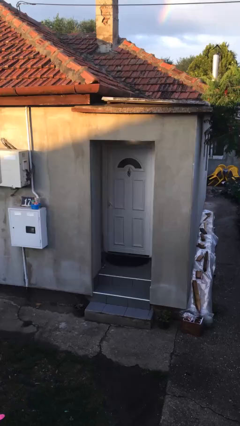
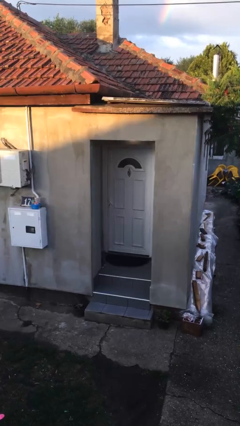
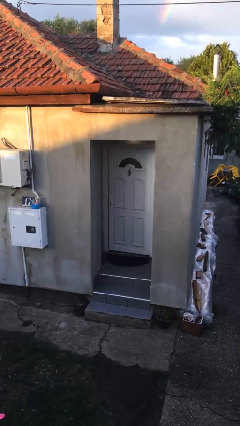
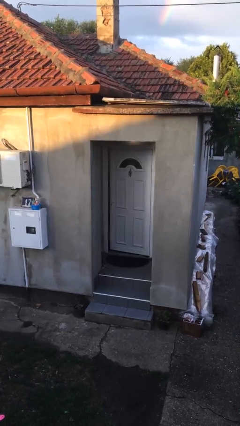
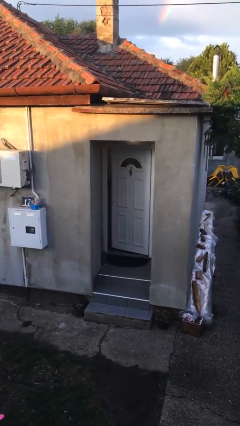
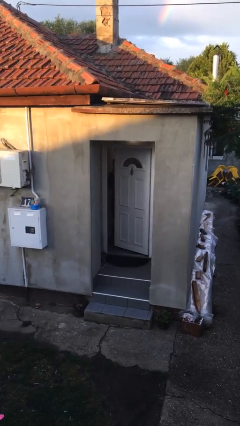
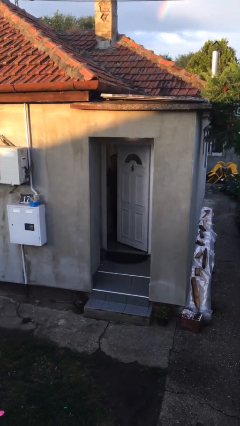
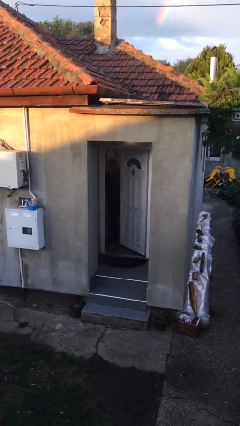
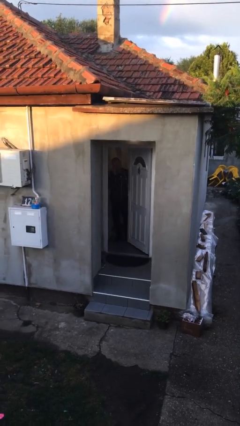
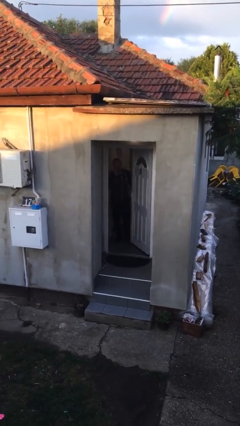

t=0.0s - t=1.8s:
person opens facility door

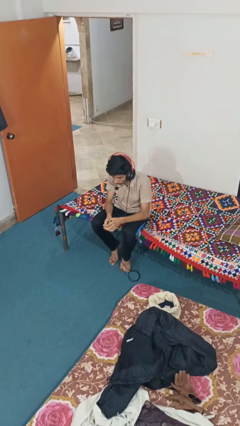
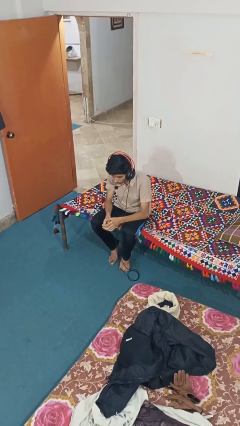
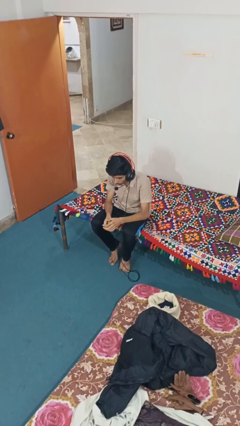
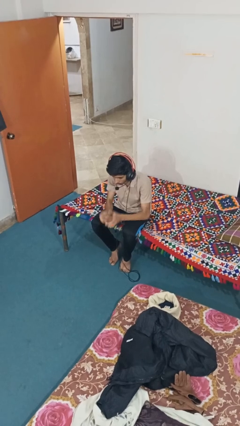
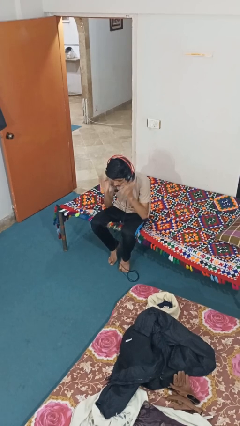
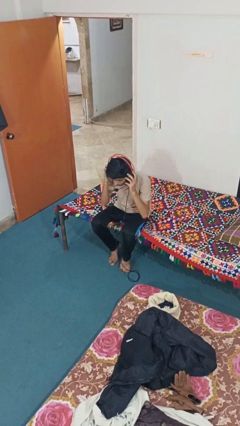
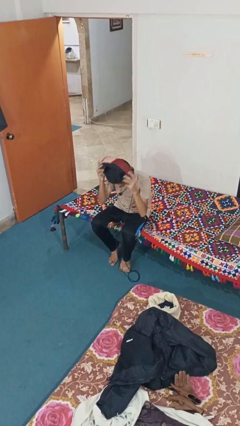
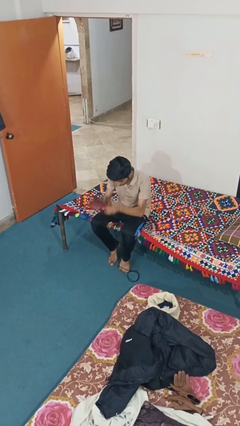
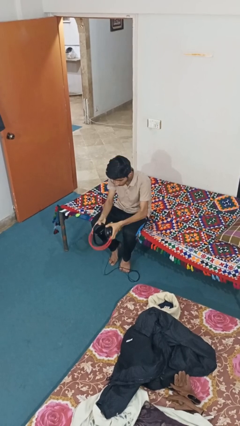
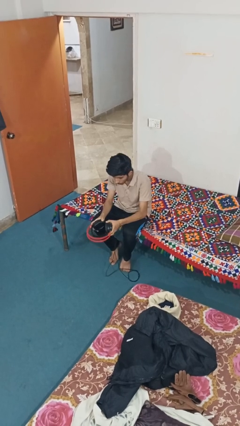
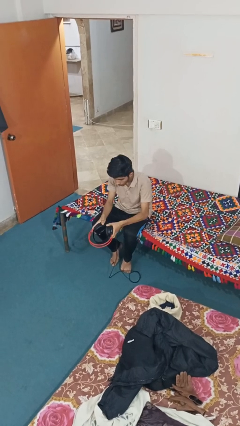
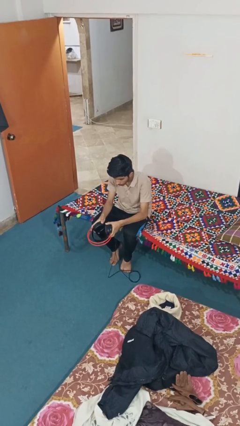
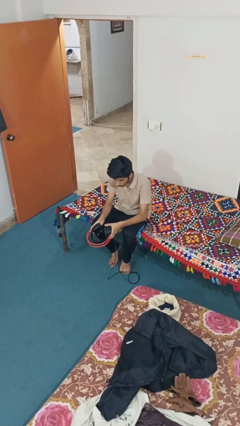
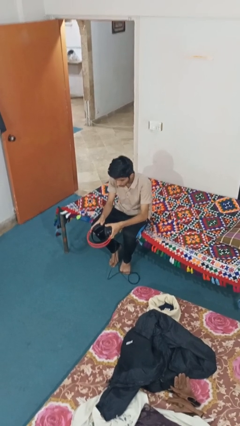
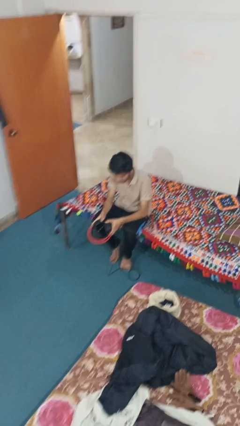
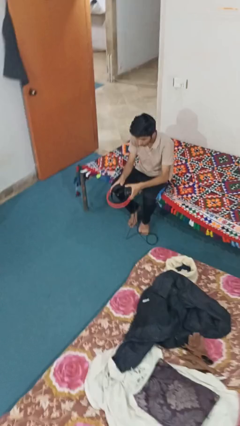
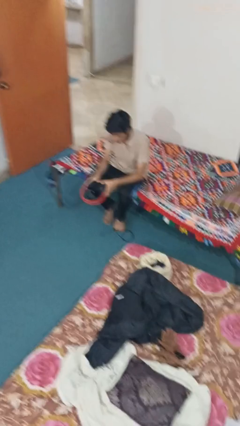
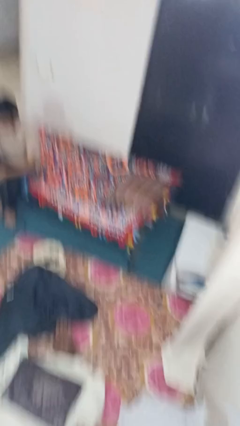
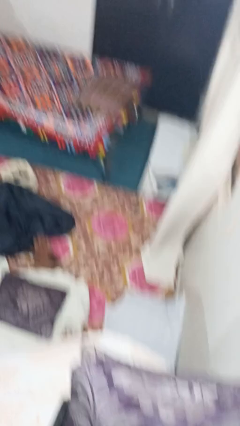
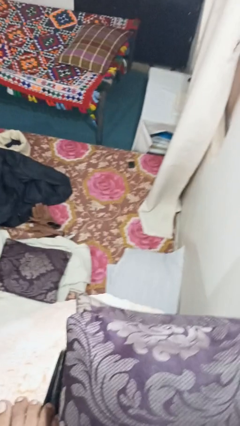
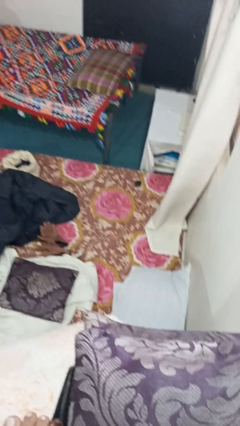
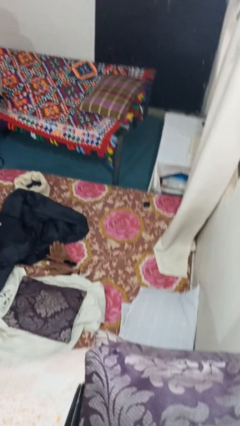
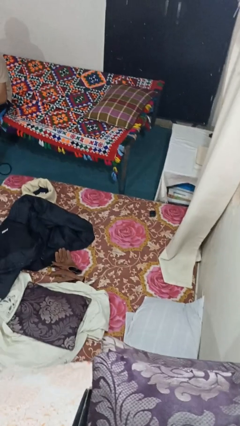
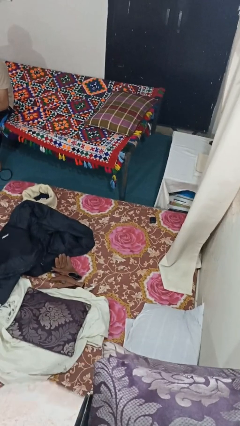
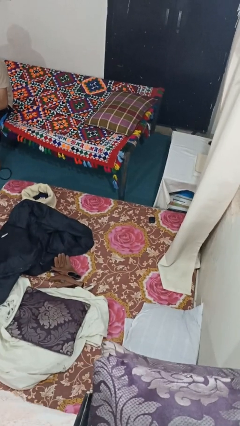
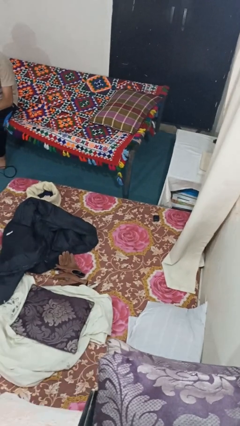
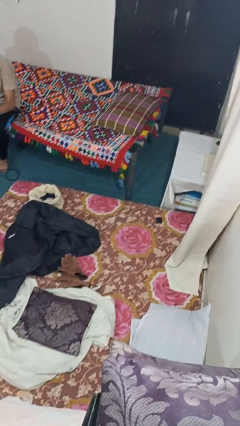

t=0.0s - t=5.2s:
person takes off headphones

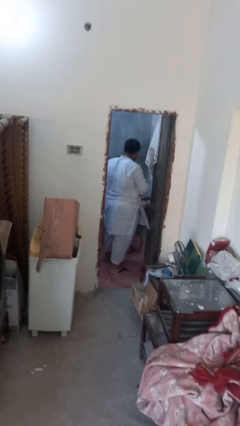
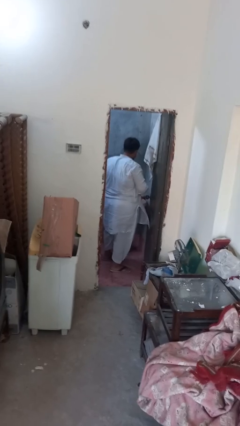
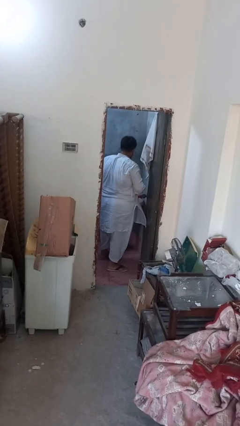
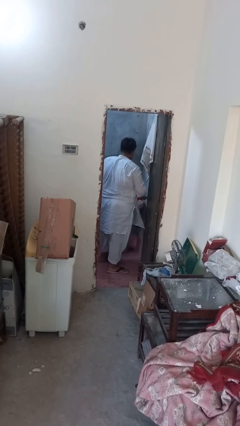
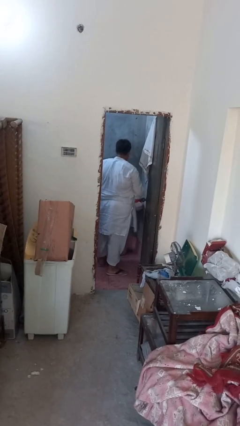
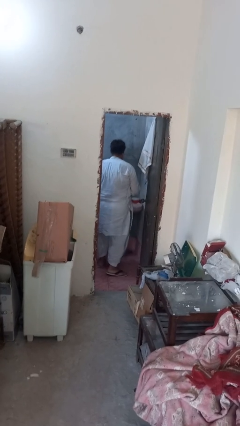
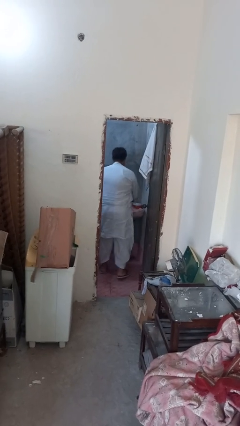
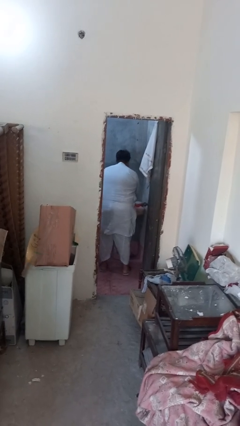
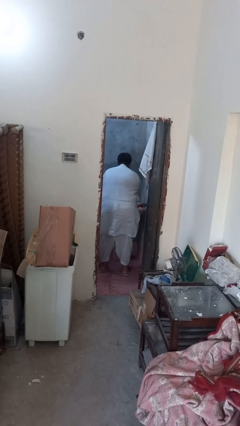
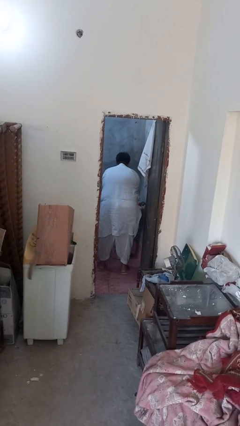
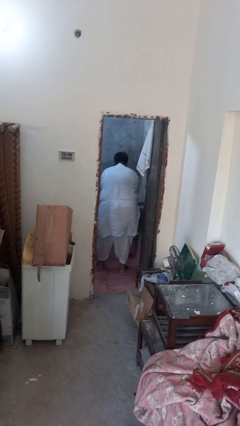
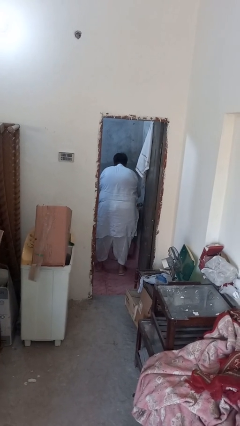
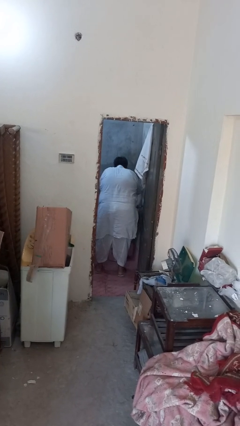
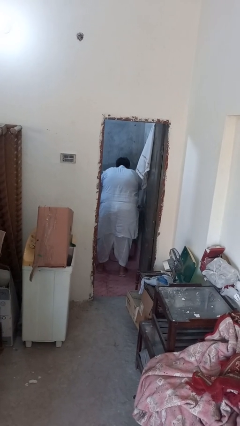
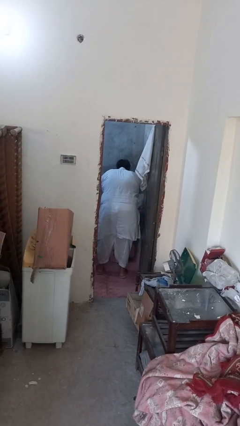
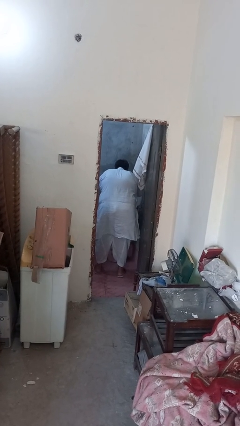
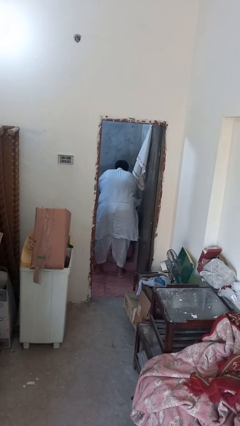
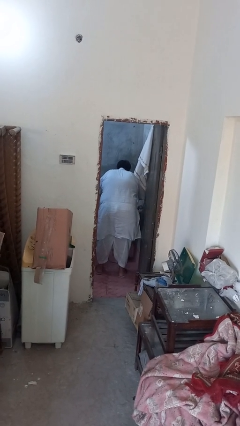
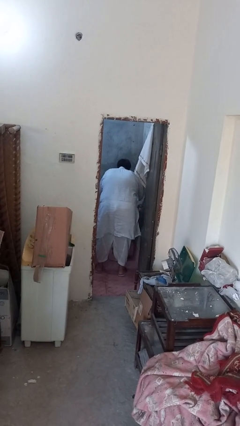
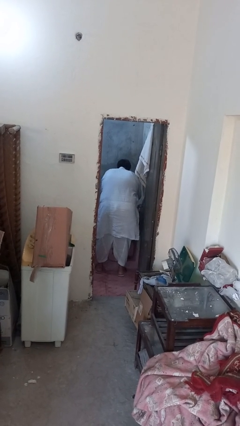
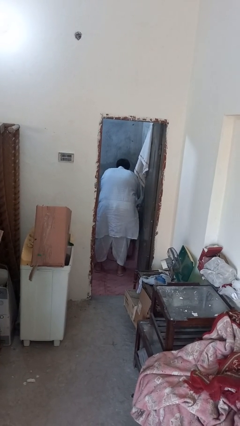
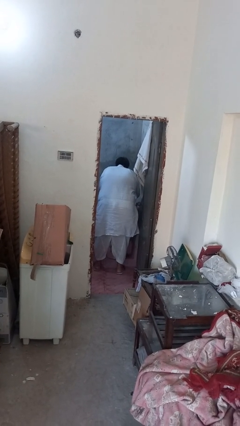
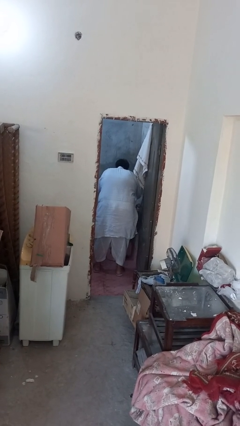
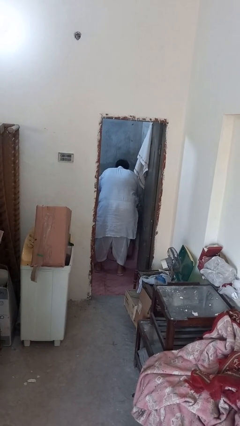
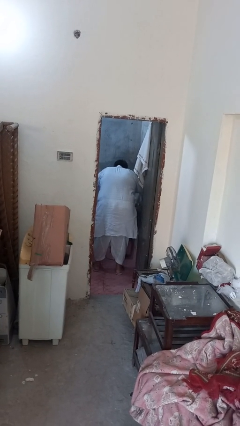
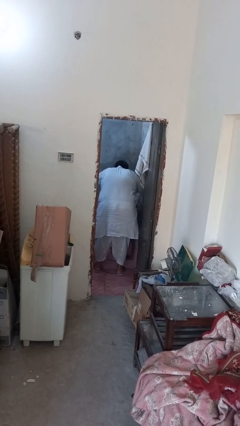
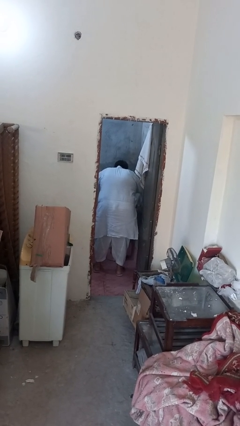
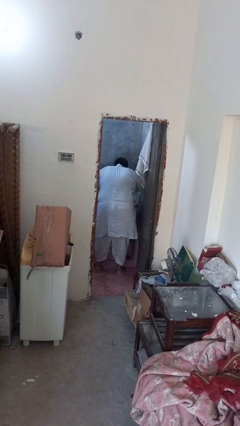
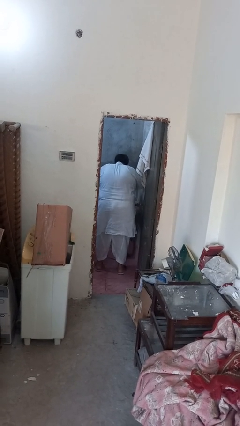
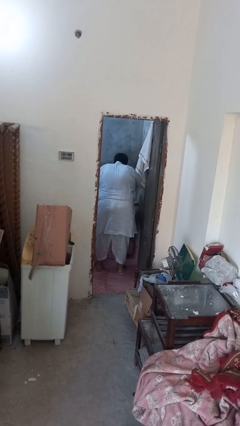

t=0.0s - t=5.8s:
person washes face

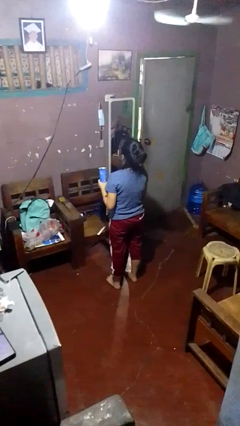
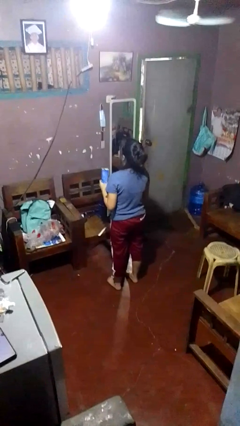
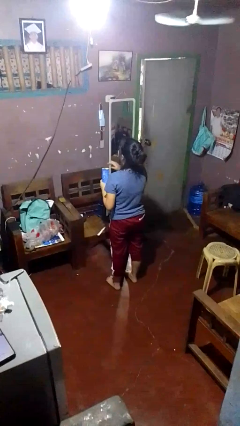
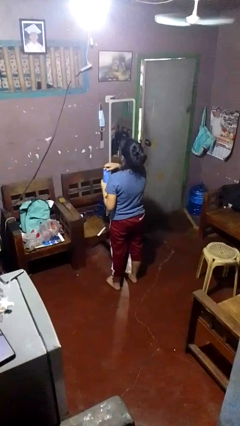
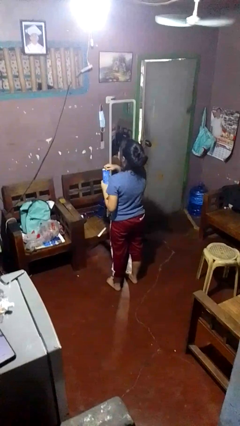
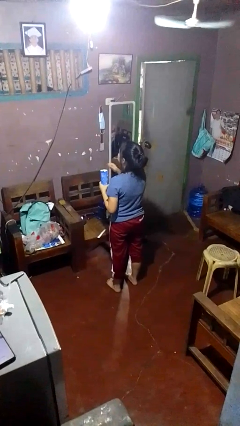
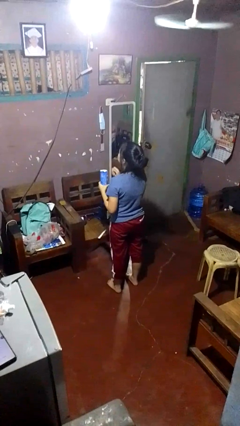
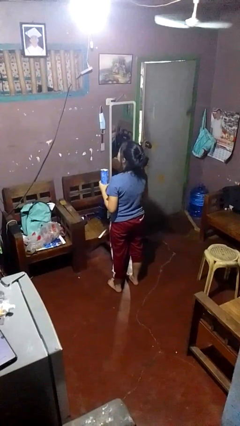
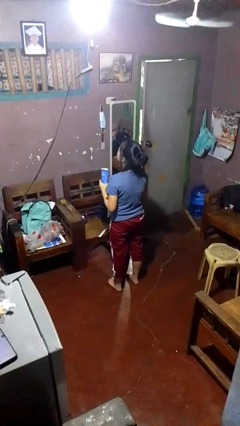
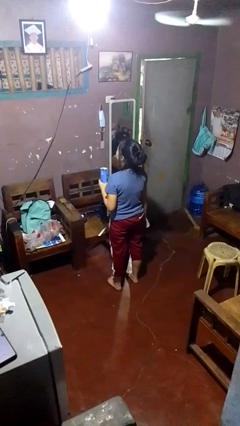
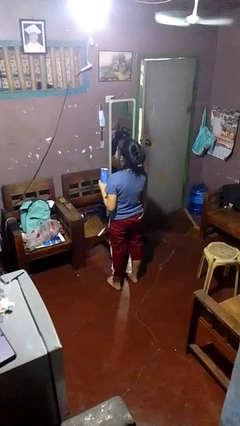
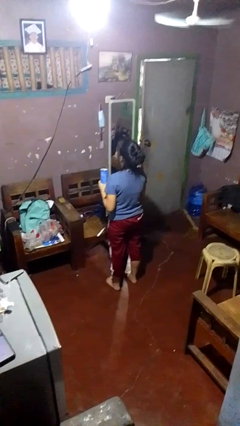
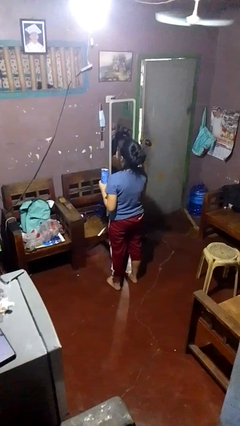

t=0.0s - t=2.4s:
person opens beverage can

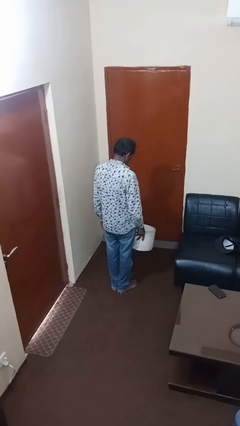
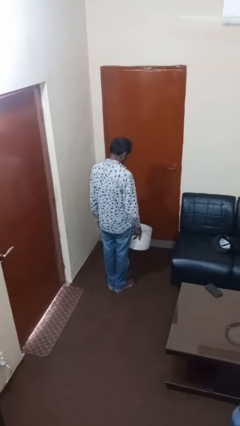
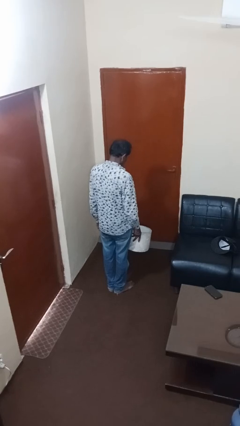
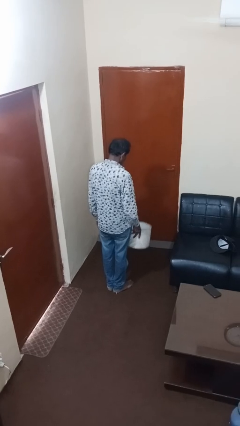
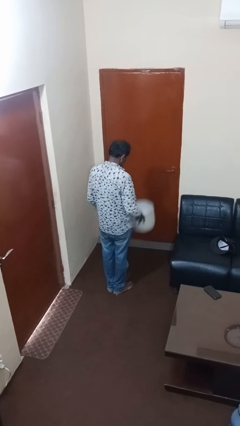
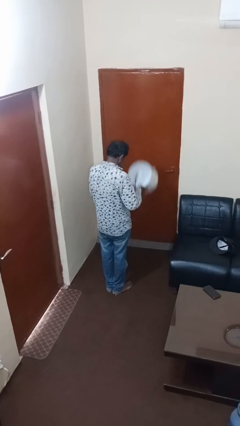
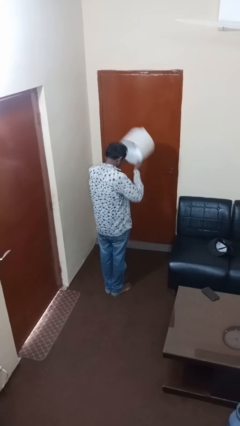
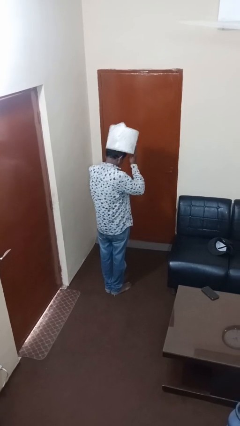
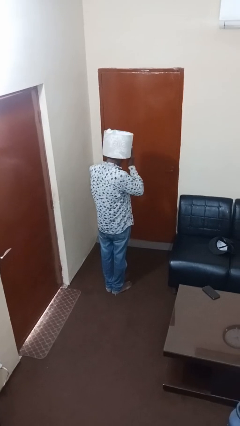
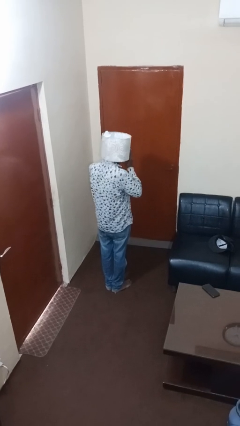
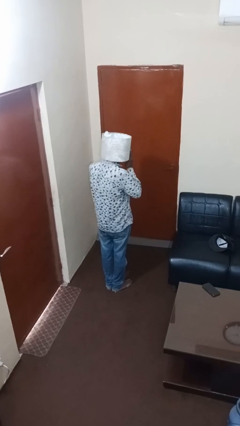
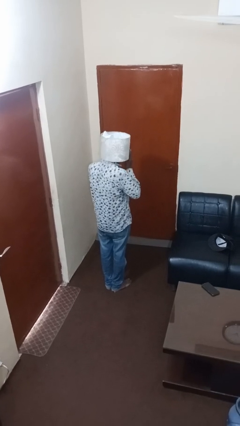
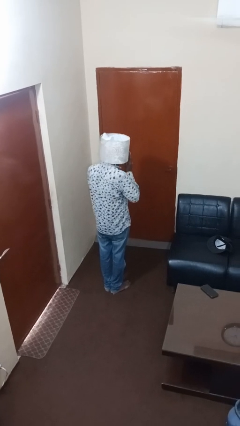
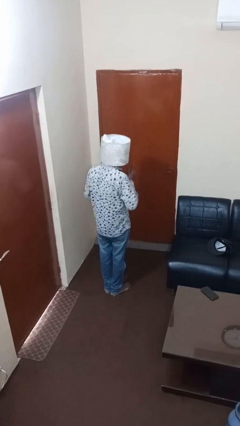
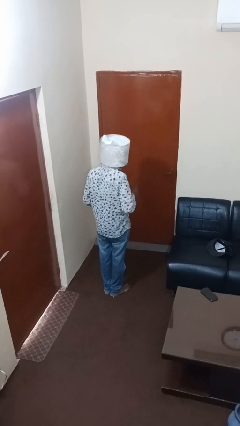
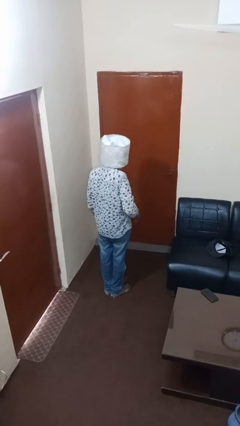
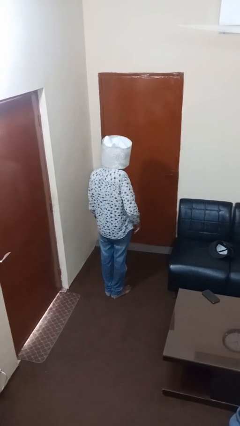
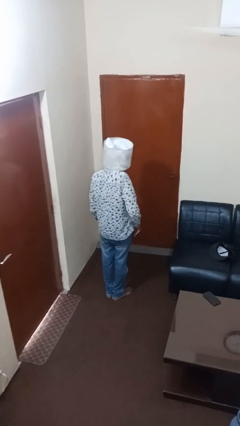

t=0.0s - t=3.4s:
person puts on hat
